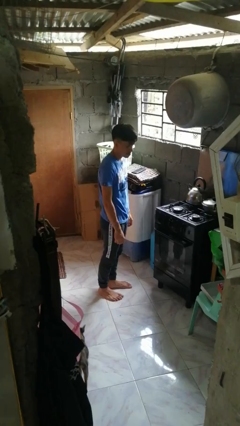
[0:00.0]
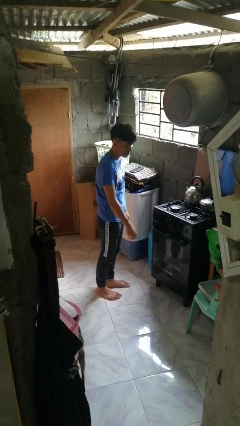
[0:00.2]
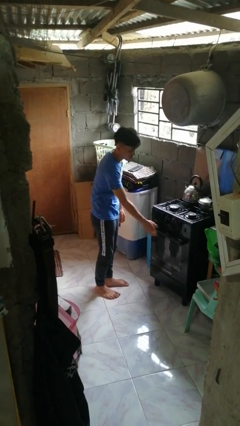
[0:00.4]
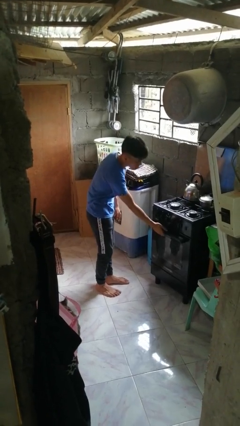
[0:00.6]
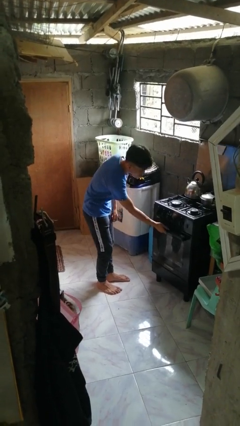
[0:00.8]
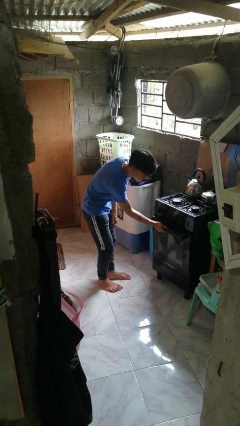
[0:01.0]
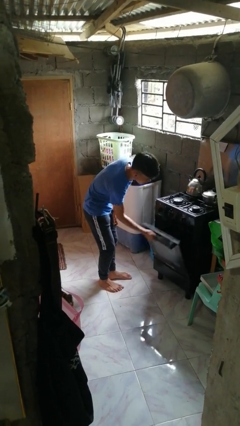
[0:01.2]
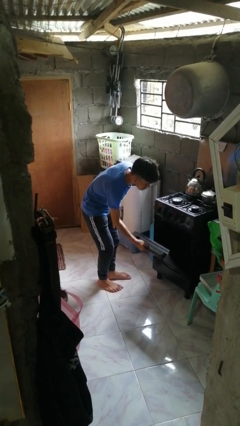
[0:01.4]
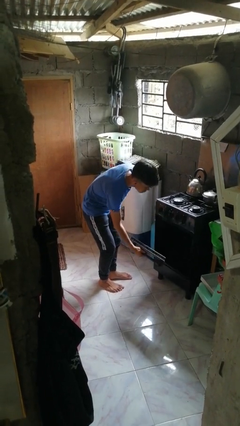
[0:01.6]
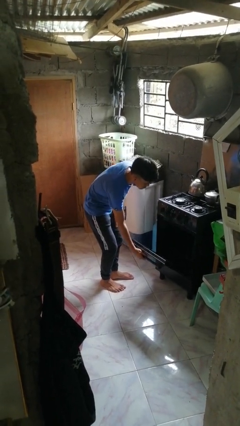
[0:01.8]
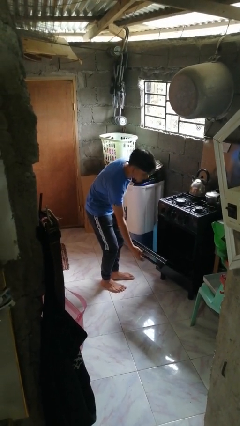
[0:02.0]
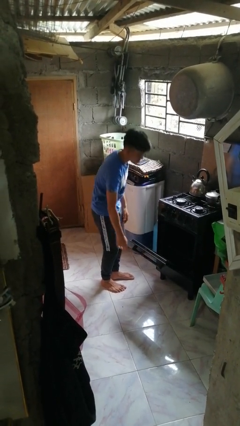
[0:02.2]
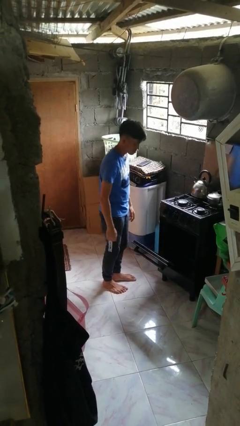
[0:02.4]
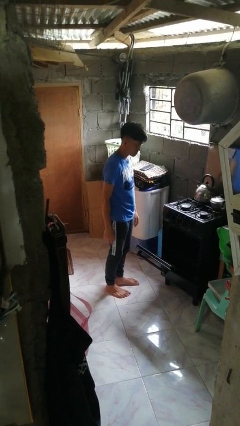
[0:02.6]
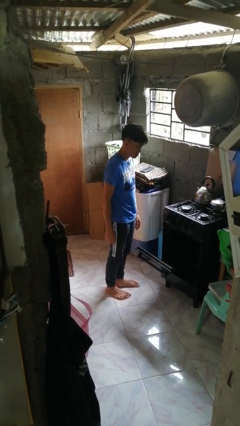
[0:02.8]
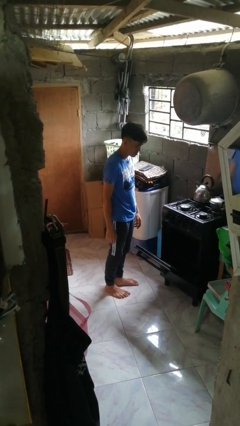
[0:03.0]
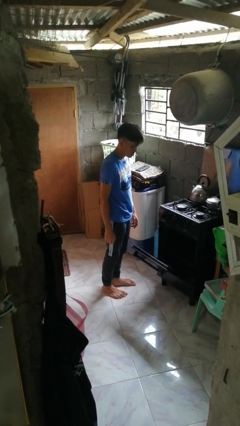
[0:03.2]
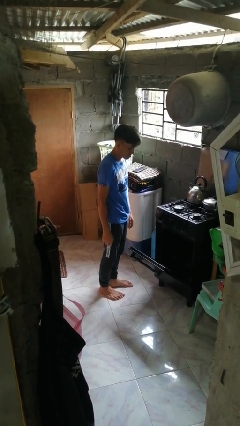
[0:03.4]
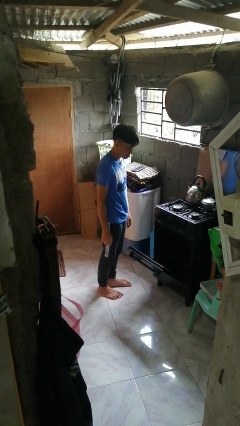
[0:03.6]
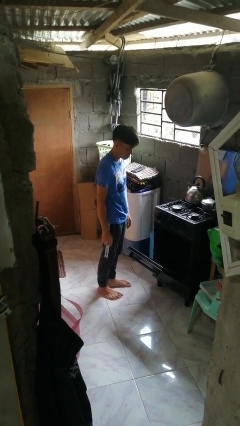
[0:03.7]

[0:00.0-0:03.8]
person opens oven door

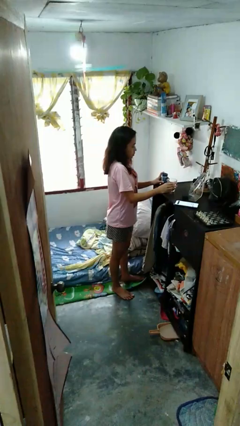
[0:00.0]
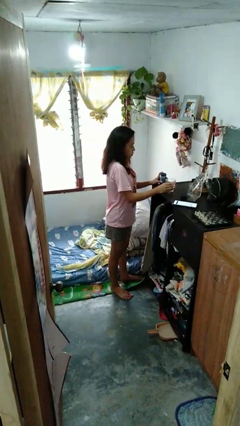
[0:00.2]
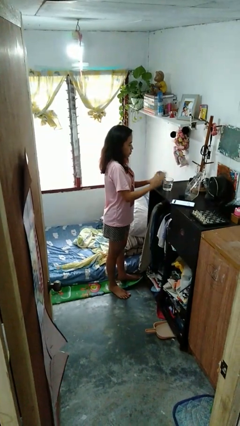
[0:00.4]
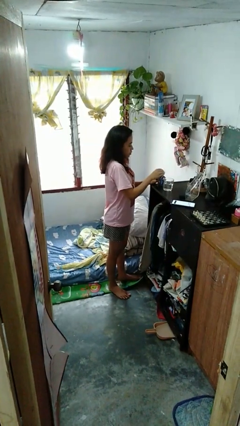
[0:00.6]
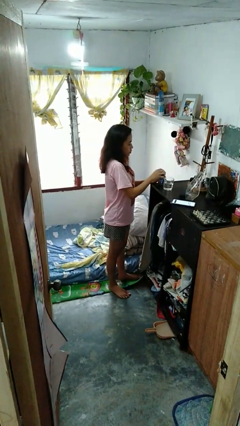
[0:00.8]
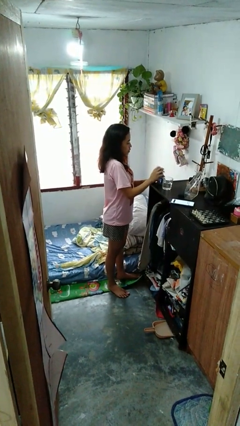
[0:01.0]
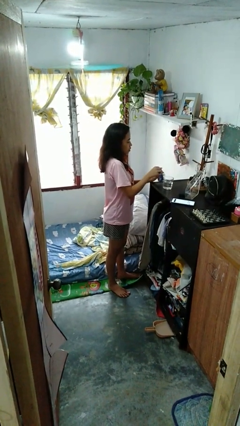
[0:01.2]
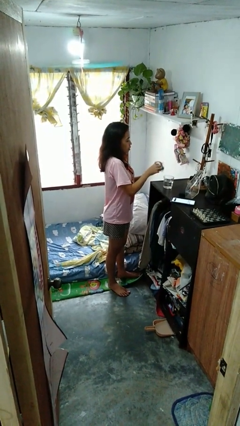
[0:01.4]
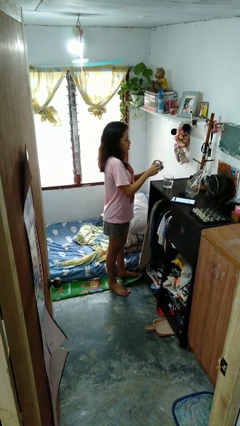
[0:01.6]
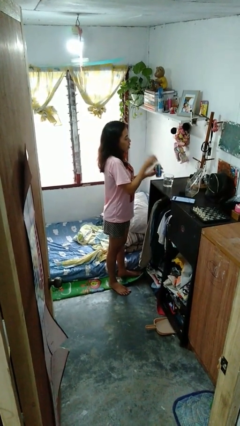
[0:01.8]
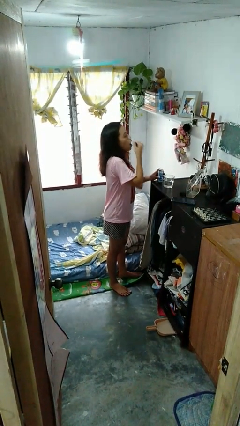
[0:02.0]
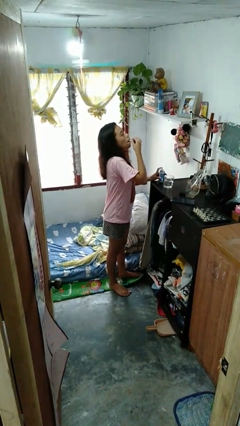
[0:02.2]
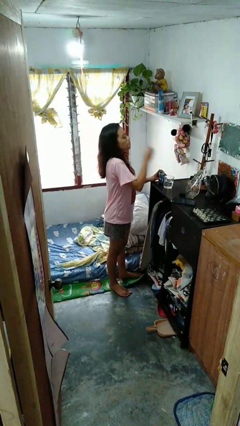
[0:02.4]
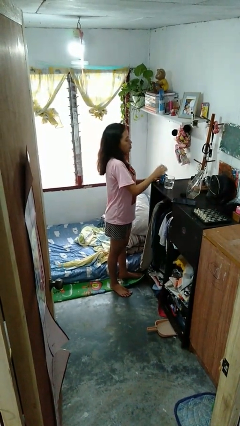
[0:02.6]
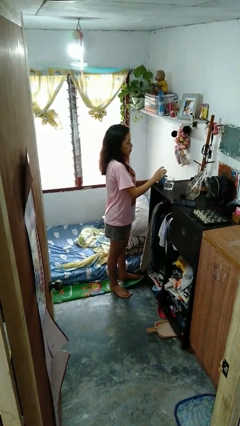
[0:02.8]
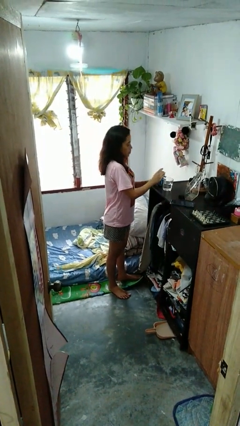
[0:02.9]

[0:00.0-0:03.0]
person takes medicine pills

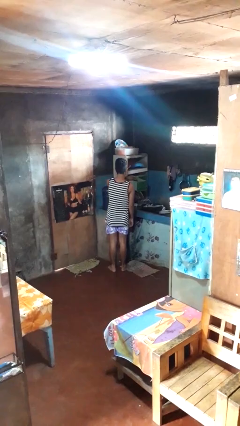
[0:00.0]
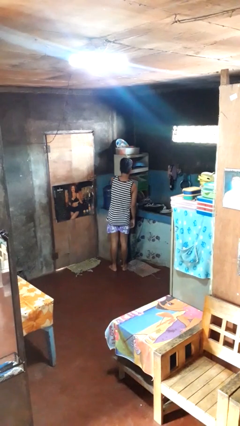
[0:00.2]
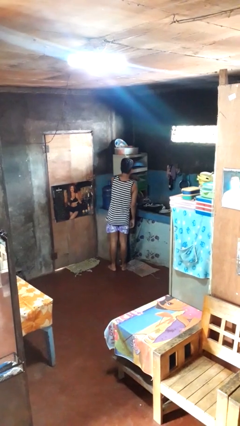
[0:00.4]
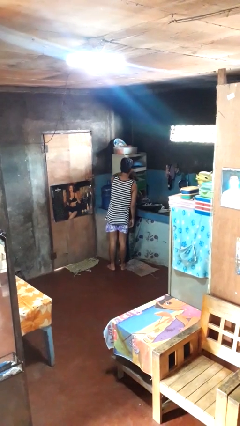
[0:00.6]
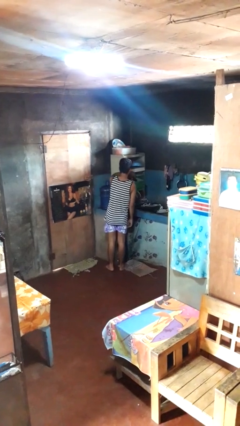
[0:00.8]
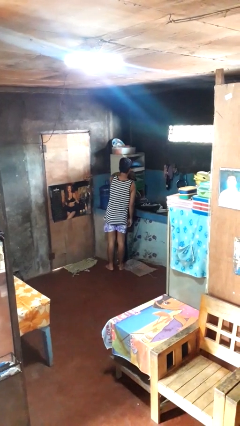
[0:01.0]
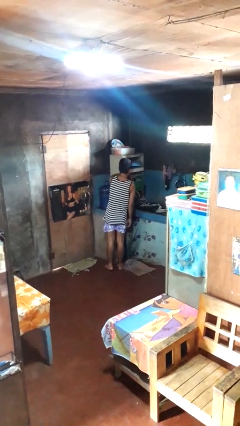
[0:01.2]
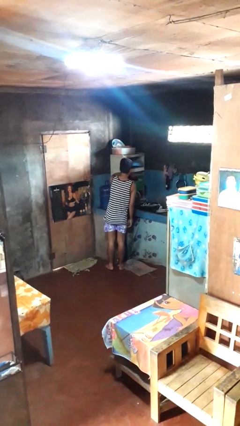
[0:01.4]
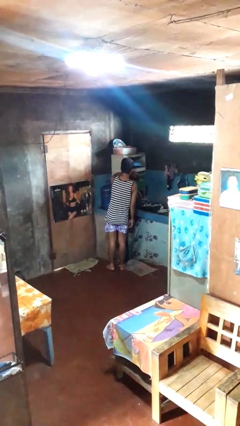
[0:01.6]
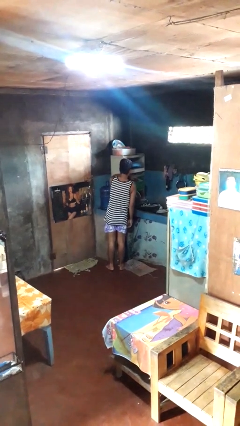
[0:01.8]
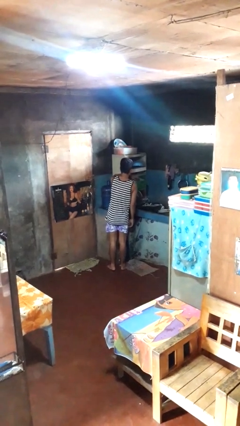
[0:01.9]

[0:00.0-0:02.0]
person searches in kitchen drawer

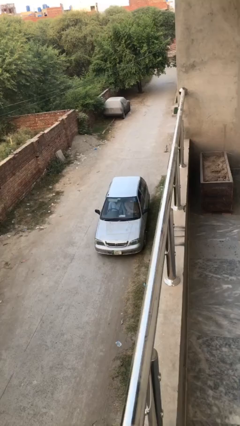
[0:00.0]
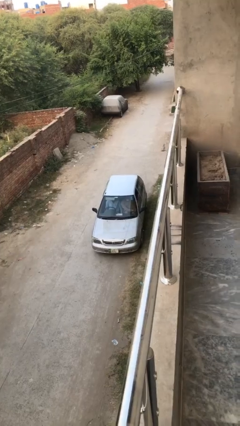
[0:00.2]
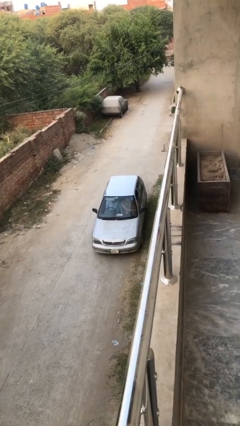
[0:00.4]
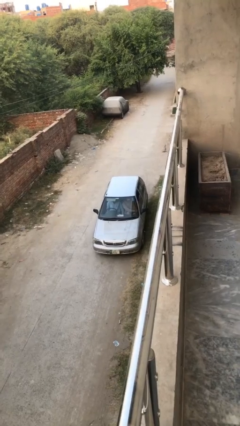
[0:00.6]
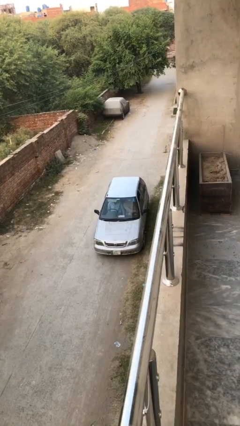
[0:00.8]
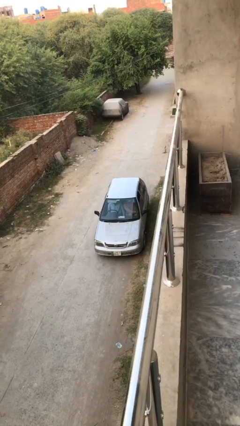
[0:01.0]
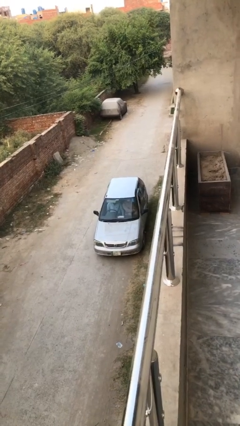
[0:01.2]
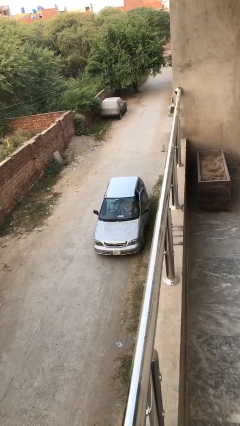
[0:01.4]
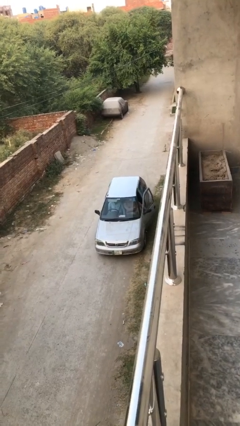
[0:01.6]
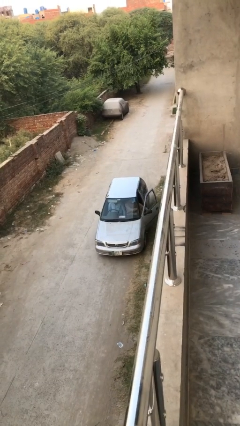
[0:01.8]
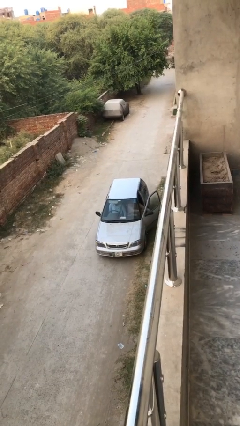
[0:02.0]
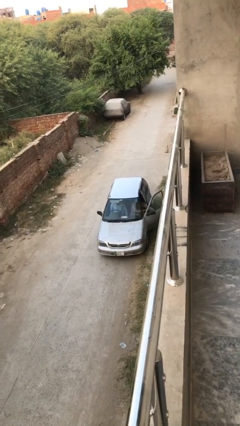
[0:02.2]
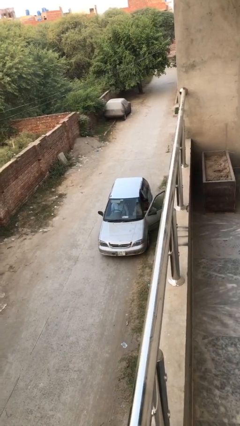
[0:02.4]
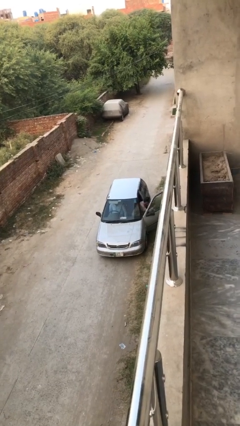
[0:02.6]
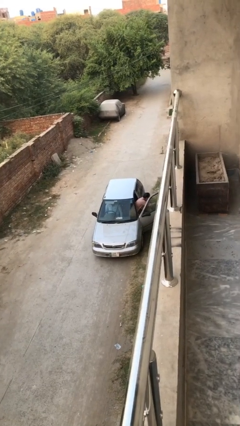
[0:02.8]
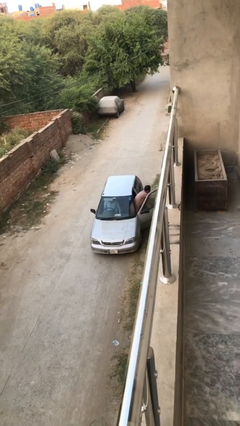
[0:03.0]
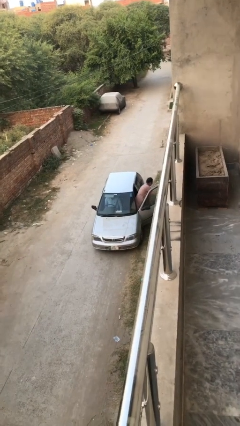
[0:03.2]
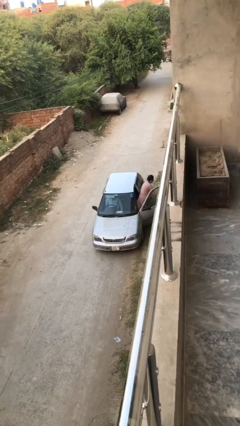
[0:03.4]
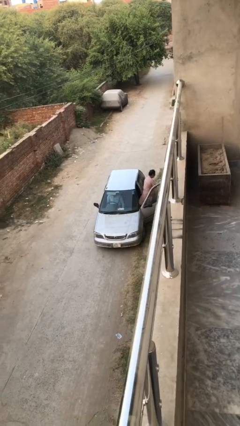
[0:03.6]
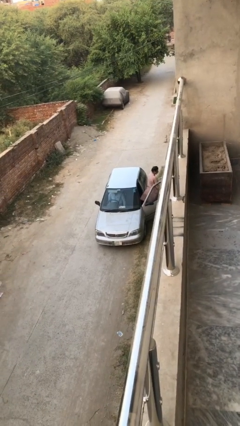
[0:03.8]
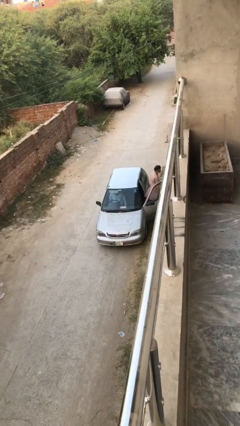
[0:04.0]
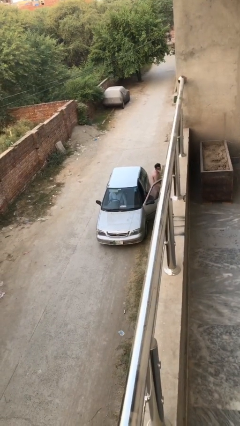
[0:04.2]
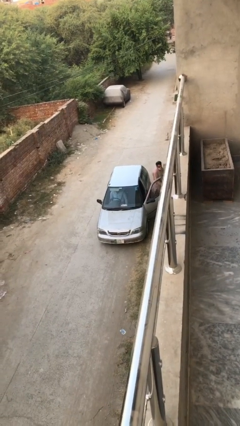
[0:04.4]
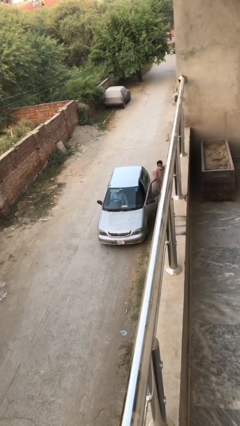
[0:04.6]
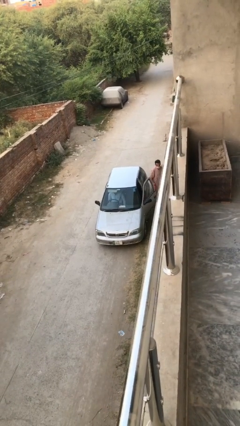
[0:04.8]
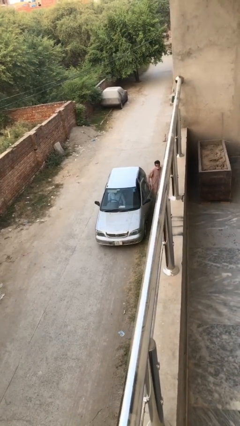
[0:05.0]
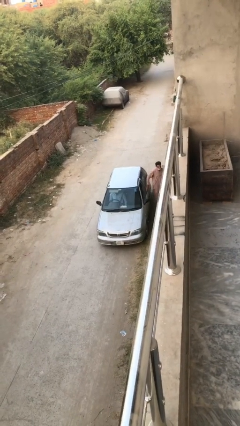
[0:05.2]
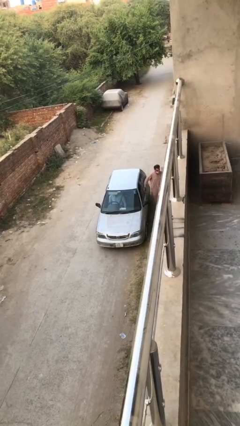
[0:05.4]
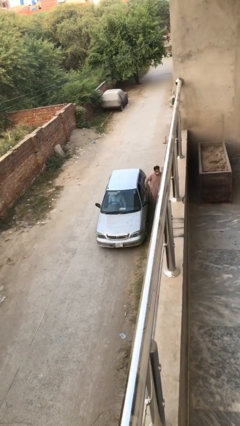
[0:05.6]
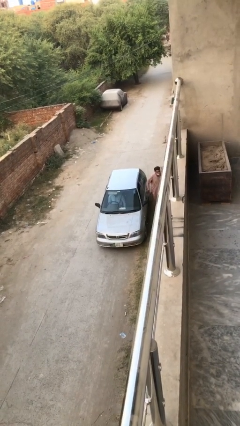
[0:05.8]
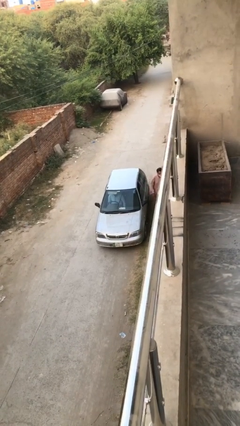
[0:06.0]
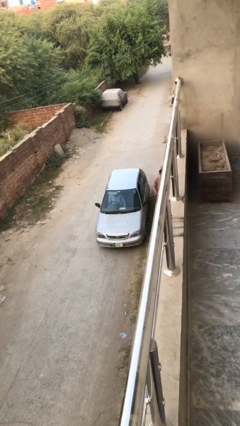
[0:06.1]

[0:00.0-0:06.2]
car drops off person

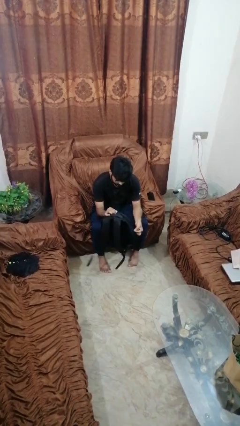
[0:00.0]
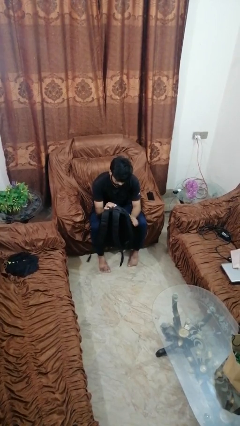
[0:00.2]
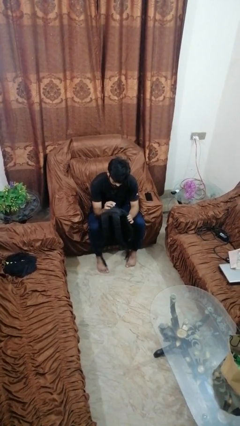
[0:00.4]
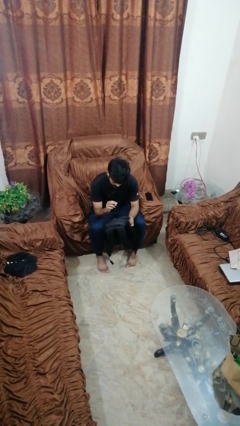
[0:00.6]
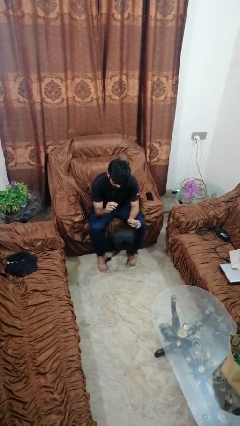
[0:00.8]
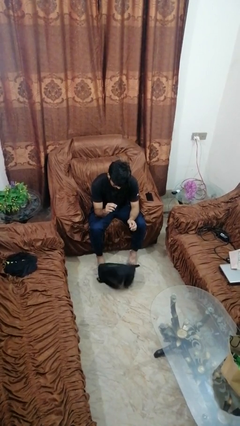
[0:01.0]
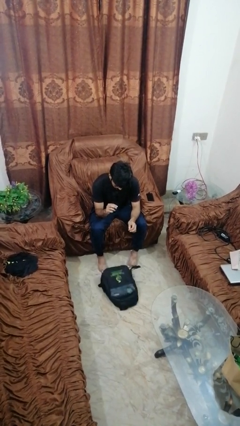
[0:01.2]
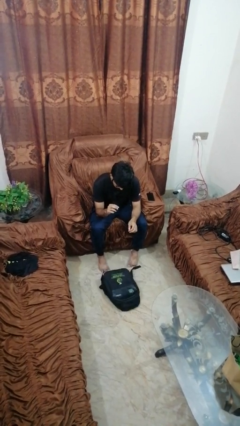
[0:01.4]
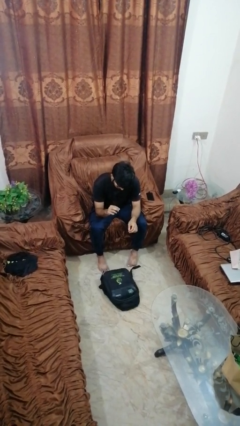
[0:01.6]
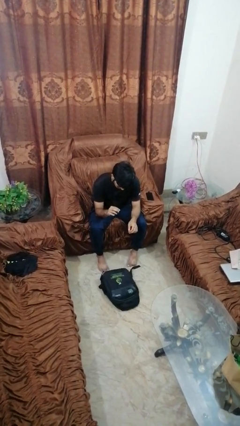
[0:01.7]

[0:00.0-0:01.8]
person drops object

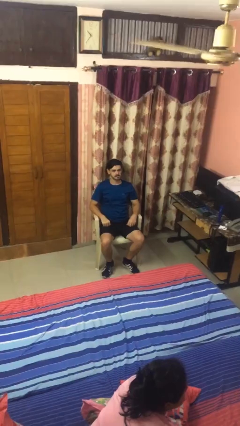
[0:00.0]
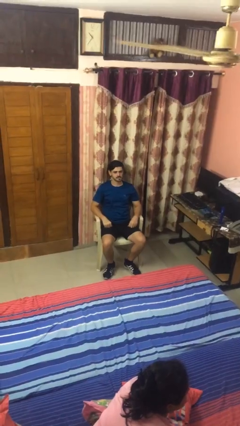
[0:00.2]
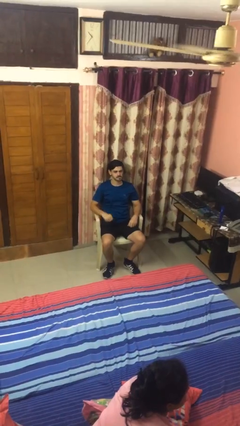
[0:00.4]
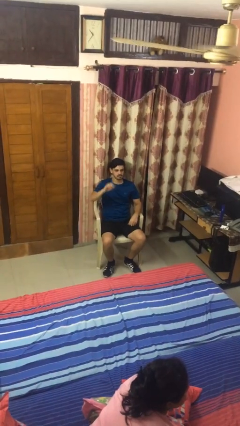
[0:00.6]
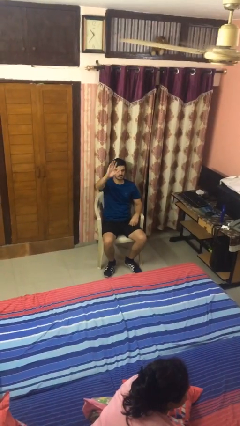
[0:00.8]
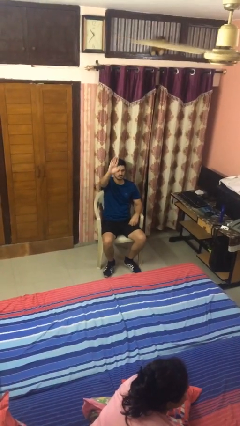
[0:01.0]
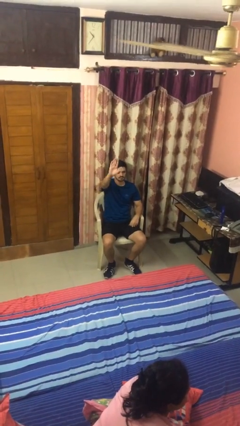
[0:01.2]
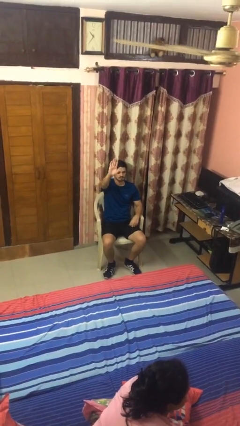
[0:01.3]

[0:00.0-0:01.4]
person gestures raise hand
